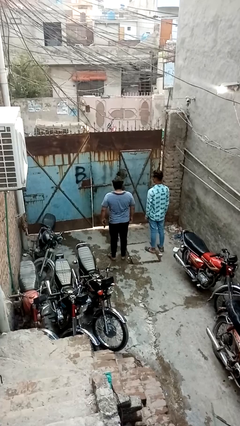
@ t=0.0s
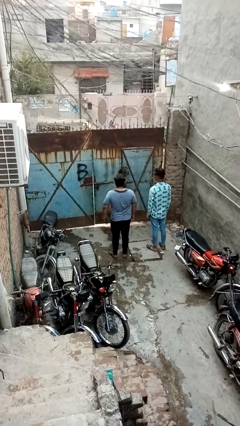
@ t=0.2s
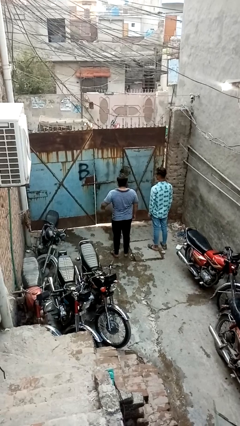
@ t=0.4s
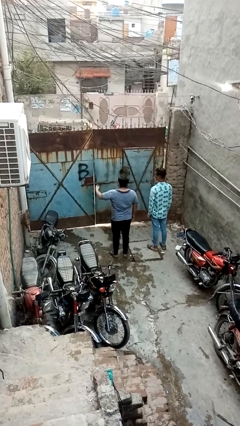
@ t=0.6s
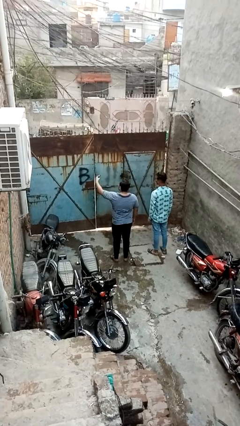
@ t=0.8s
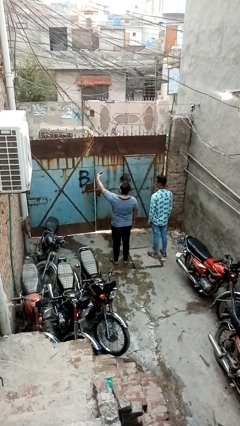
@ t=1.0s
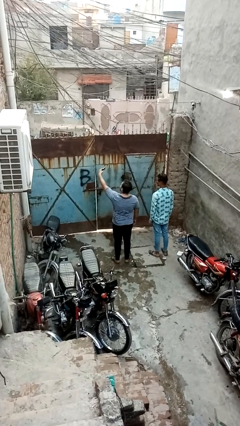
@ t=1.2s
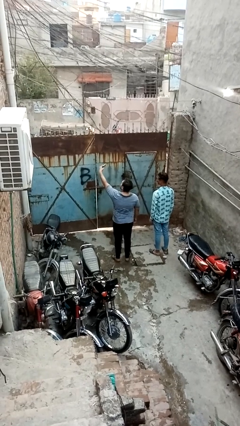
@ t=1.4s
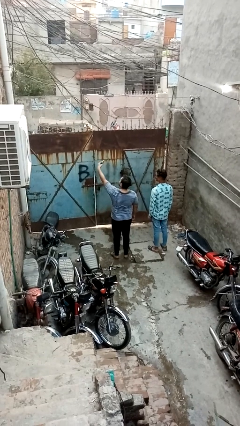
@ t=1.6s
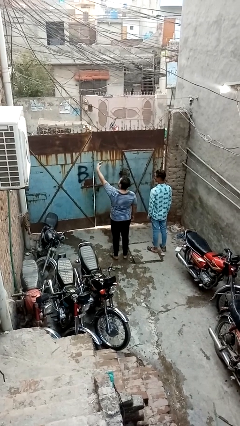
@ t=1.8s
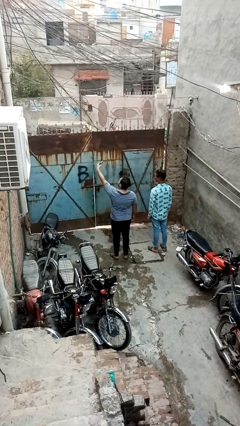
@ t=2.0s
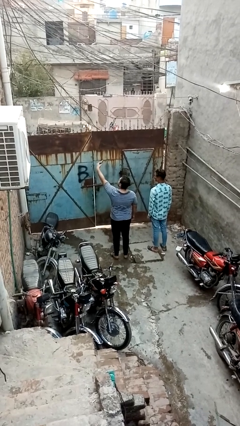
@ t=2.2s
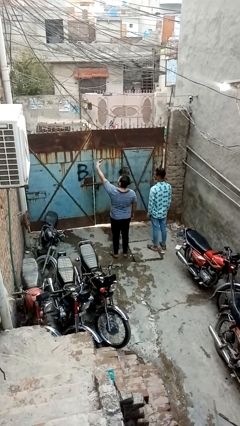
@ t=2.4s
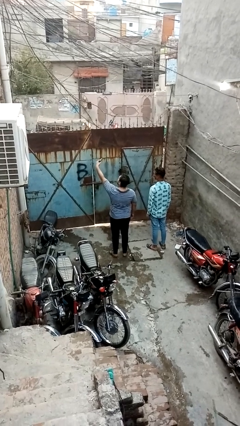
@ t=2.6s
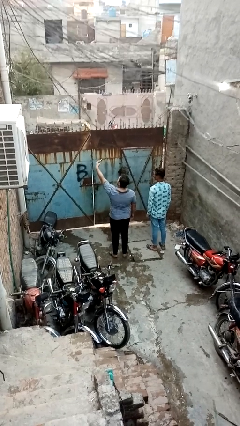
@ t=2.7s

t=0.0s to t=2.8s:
person takes selfie with person

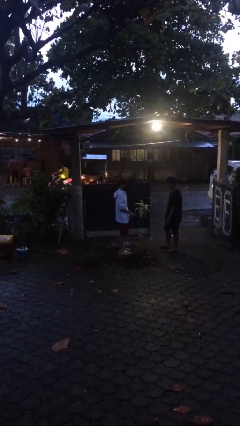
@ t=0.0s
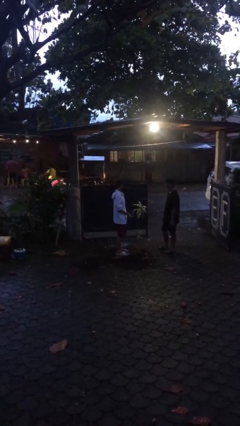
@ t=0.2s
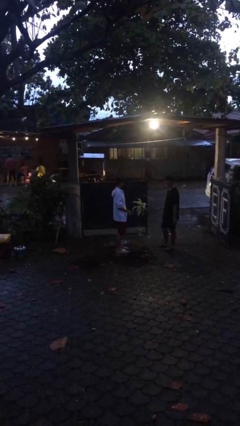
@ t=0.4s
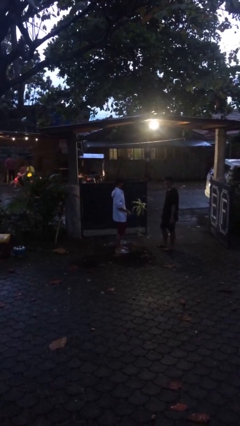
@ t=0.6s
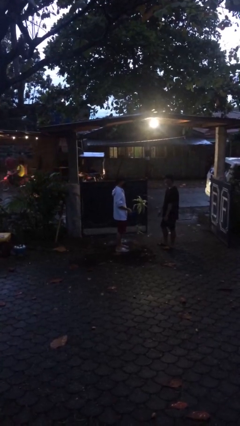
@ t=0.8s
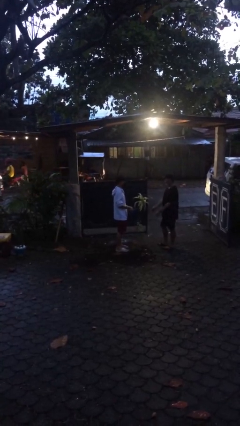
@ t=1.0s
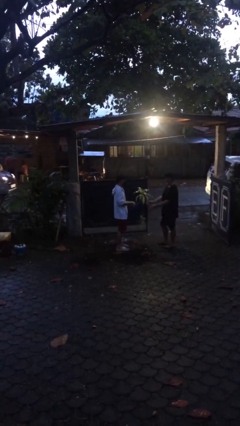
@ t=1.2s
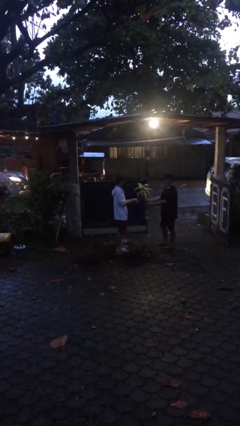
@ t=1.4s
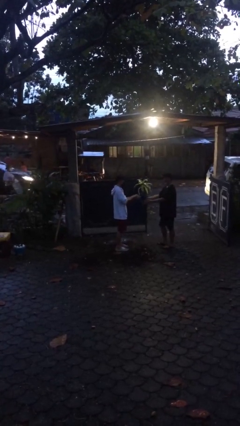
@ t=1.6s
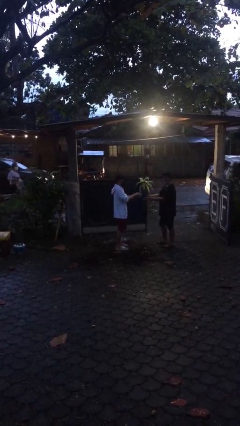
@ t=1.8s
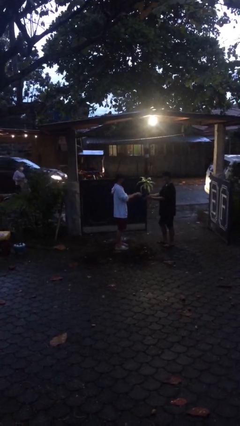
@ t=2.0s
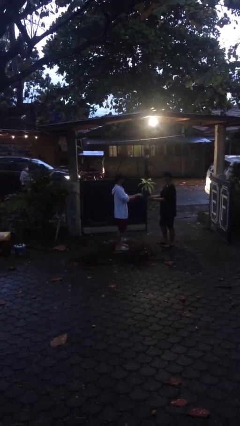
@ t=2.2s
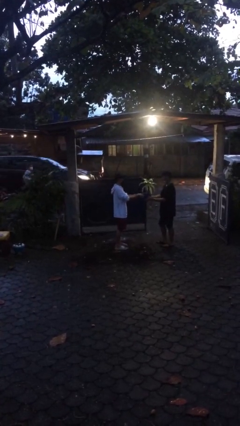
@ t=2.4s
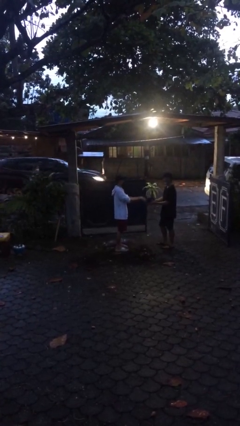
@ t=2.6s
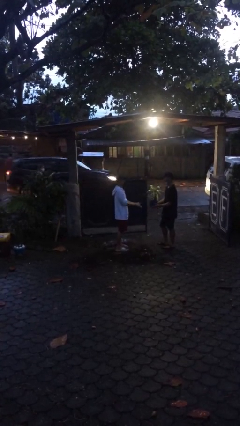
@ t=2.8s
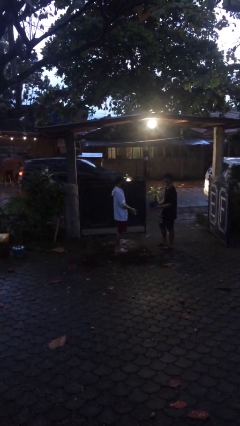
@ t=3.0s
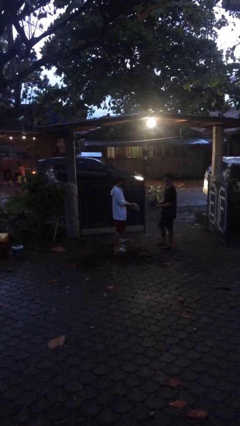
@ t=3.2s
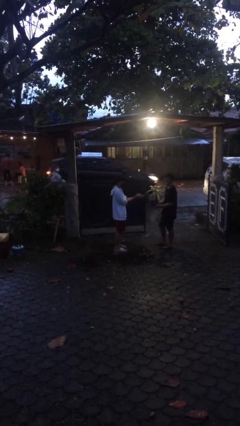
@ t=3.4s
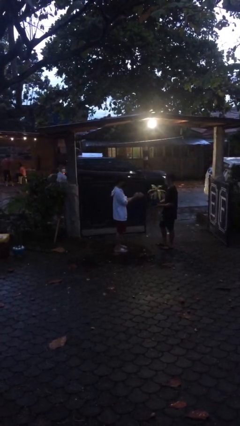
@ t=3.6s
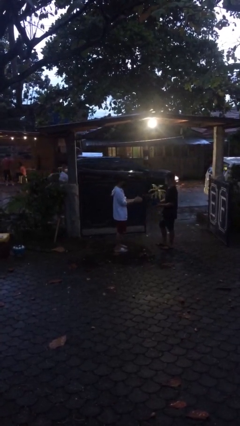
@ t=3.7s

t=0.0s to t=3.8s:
person transfers object to person

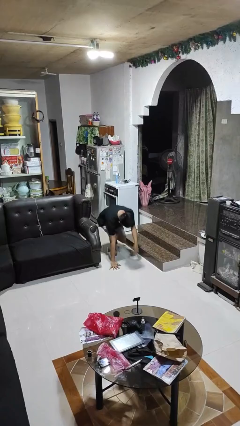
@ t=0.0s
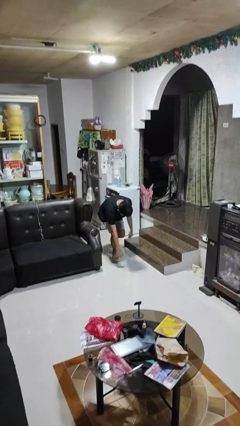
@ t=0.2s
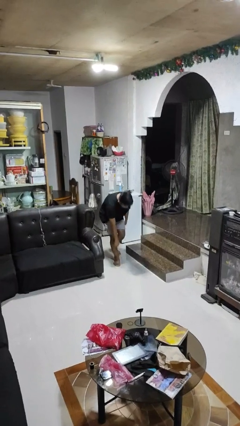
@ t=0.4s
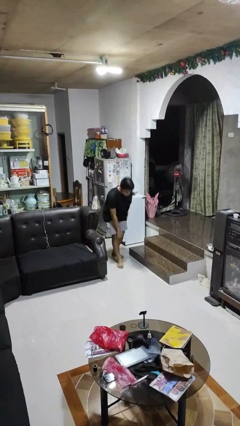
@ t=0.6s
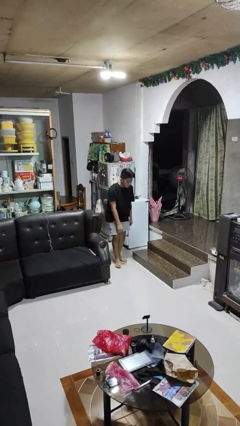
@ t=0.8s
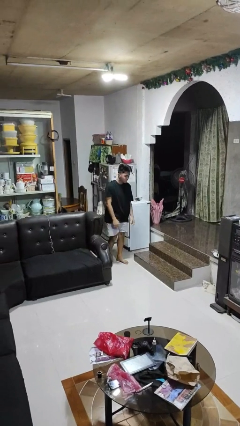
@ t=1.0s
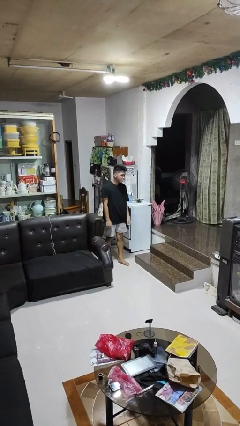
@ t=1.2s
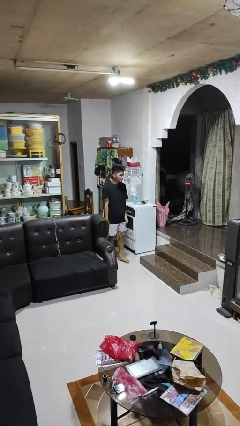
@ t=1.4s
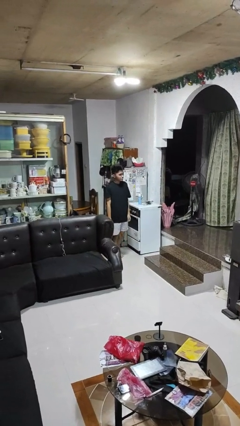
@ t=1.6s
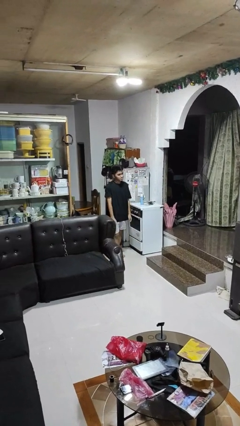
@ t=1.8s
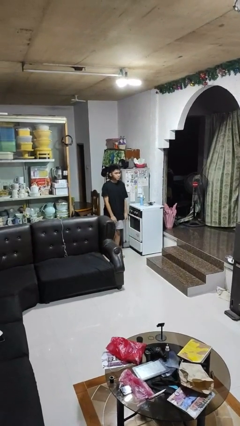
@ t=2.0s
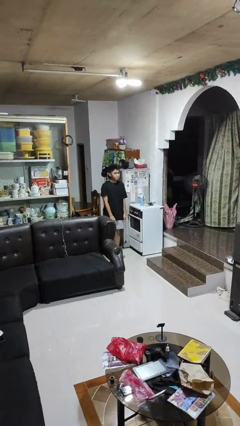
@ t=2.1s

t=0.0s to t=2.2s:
person stands up from floor

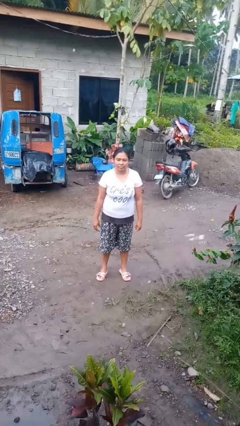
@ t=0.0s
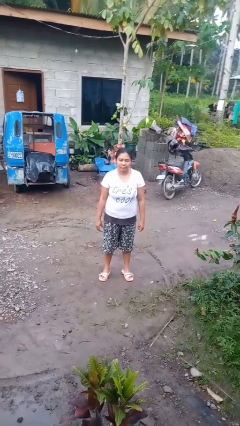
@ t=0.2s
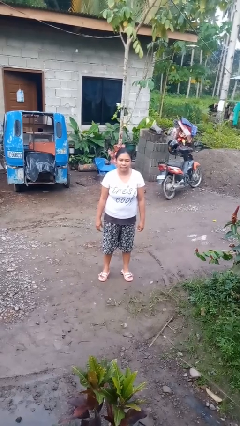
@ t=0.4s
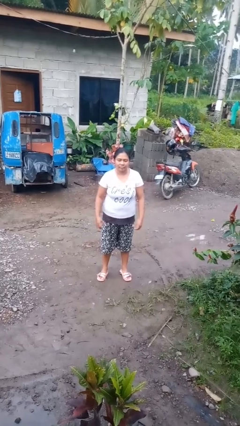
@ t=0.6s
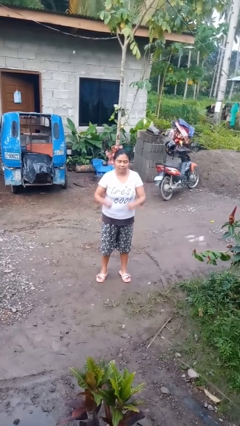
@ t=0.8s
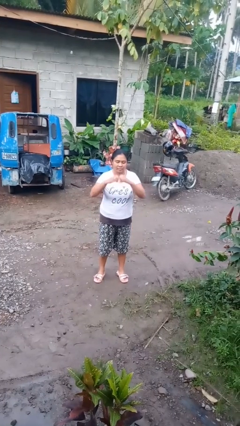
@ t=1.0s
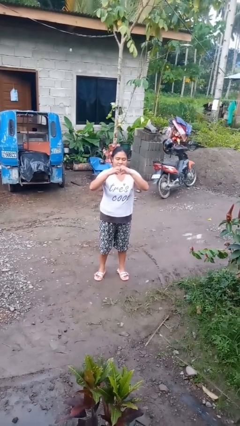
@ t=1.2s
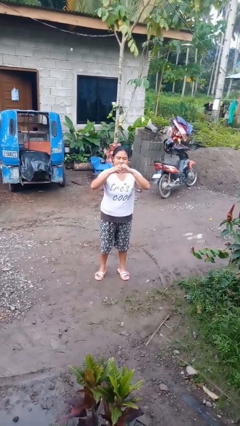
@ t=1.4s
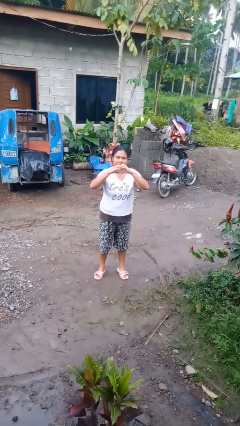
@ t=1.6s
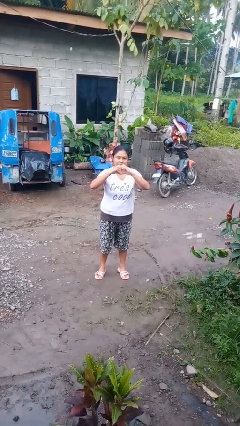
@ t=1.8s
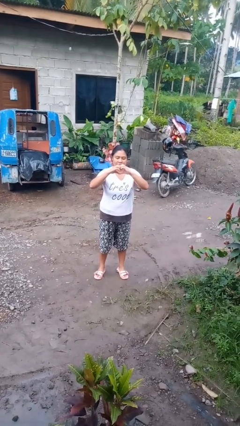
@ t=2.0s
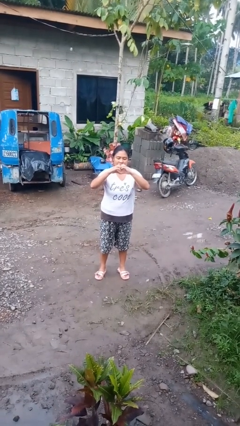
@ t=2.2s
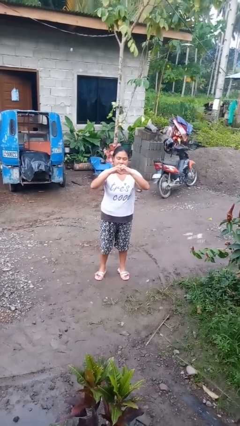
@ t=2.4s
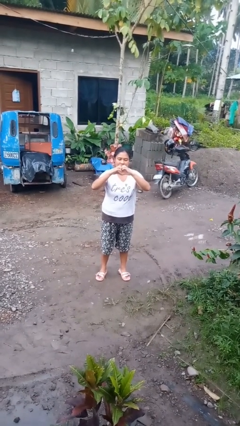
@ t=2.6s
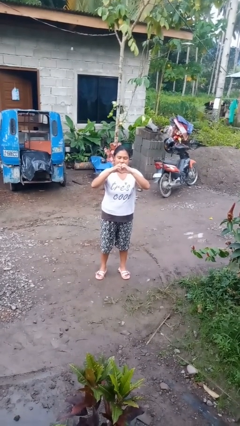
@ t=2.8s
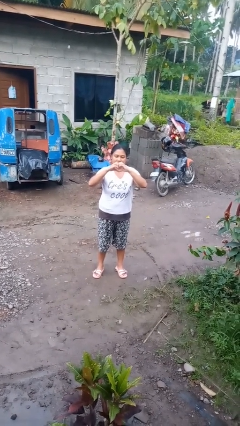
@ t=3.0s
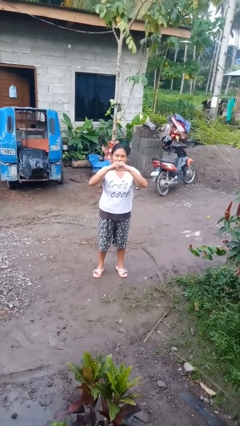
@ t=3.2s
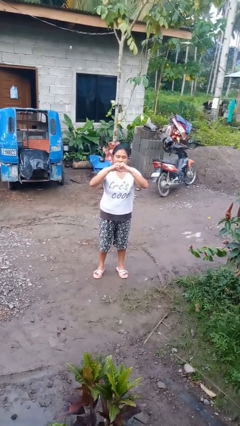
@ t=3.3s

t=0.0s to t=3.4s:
person gestures heart

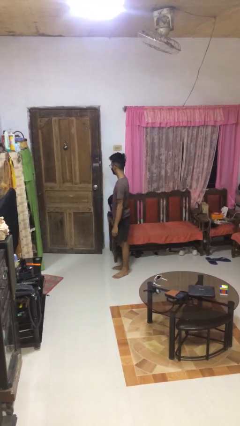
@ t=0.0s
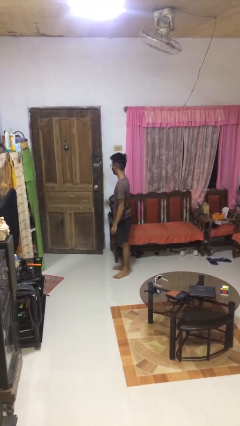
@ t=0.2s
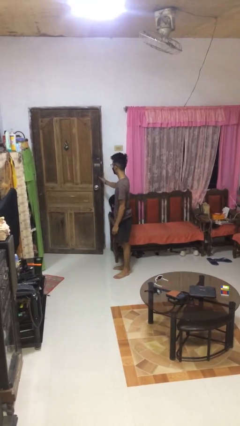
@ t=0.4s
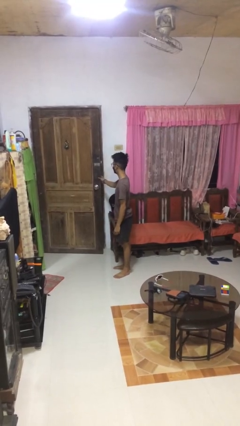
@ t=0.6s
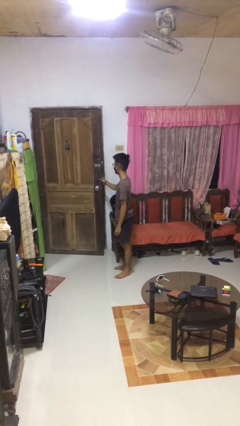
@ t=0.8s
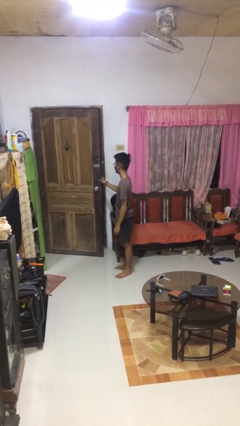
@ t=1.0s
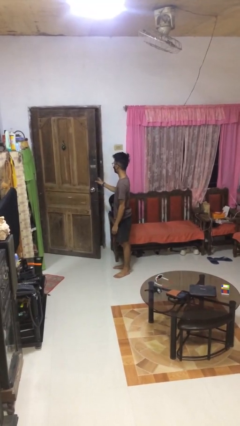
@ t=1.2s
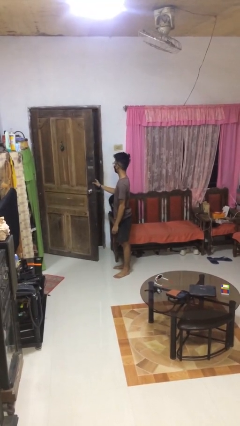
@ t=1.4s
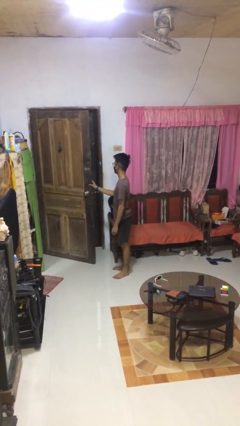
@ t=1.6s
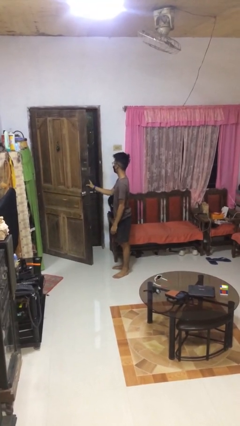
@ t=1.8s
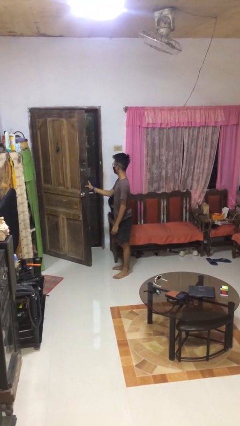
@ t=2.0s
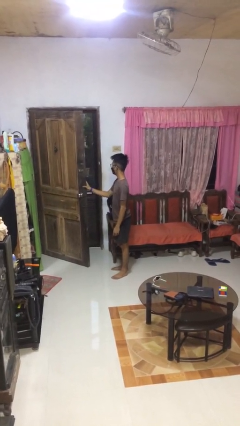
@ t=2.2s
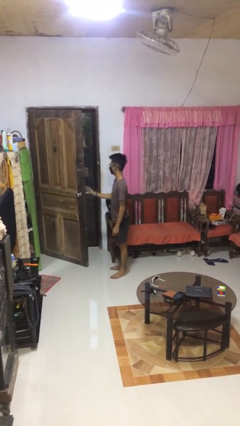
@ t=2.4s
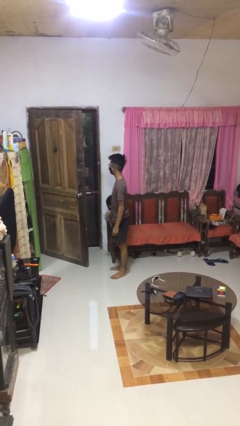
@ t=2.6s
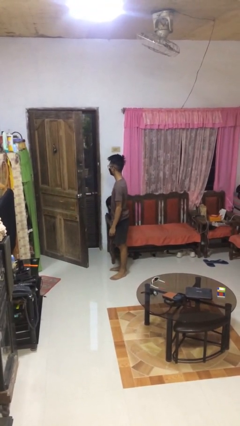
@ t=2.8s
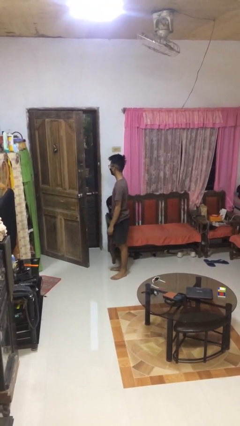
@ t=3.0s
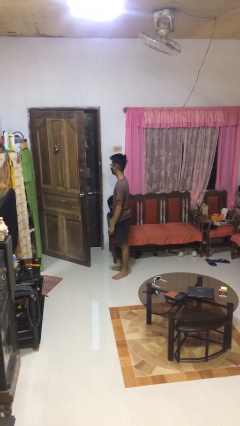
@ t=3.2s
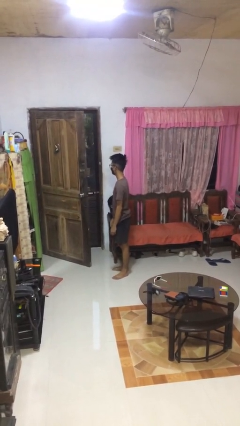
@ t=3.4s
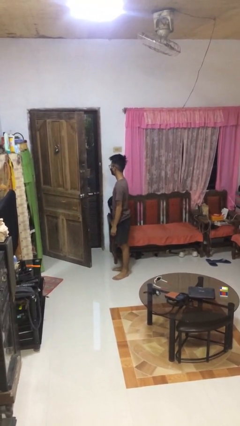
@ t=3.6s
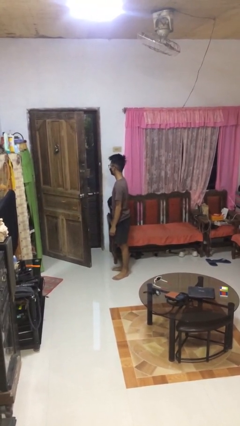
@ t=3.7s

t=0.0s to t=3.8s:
person opens facility door

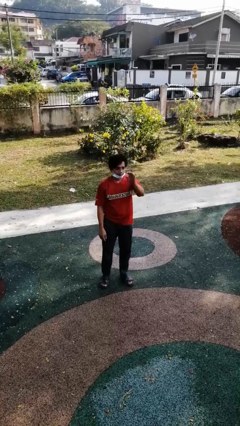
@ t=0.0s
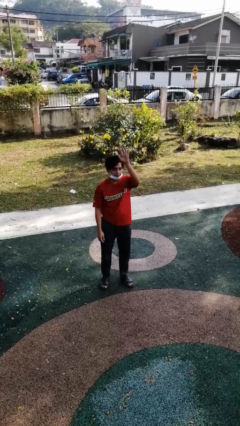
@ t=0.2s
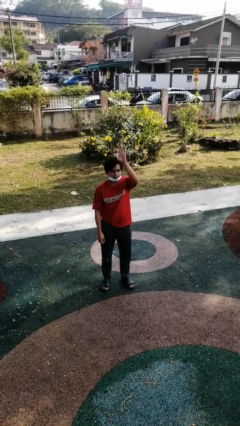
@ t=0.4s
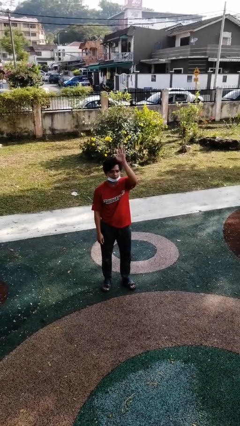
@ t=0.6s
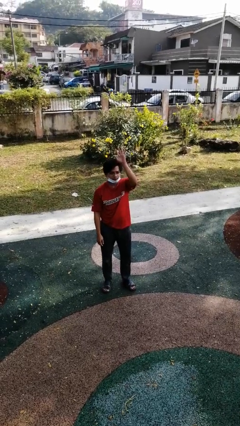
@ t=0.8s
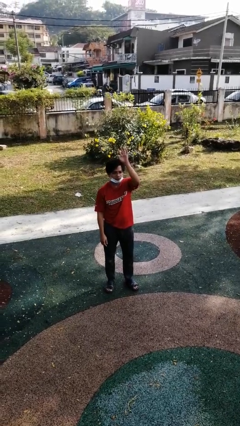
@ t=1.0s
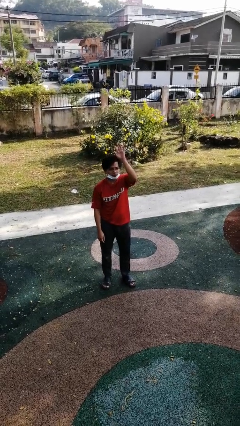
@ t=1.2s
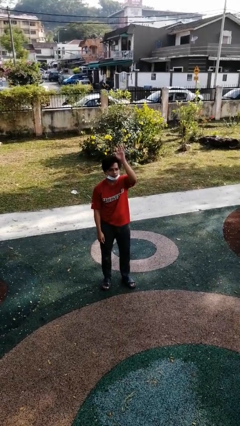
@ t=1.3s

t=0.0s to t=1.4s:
person gestures raise hand
